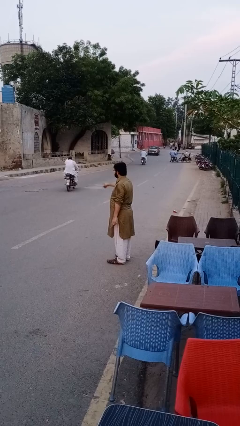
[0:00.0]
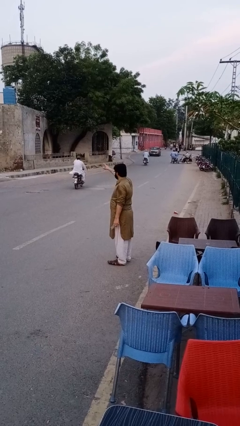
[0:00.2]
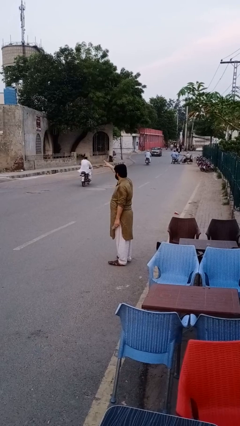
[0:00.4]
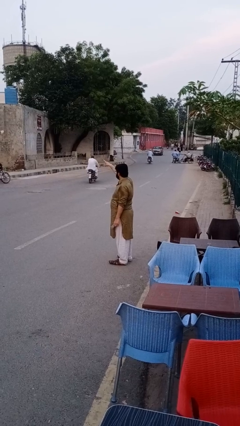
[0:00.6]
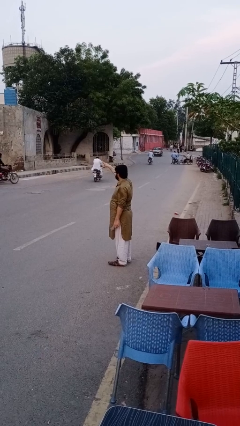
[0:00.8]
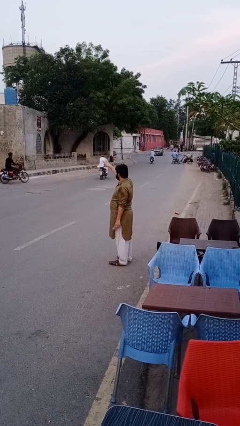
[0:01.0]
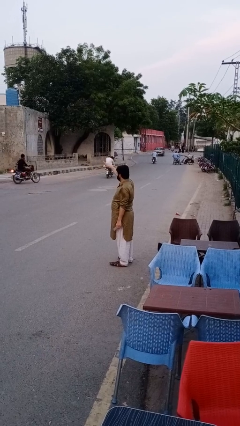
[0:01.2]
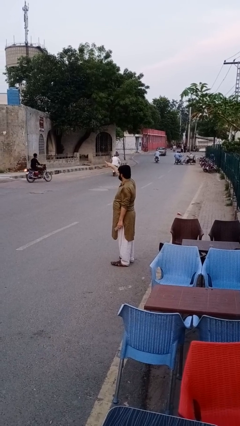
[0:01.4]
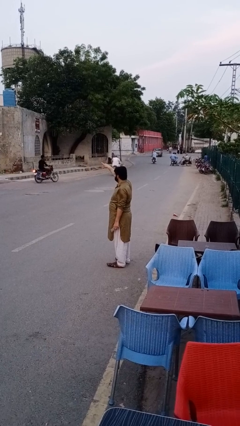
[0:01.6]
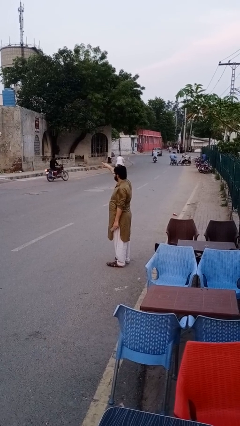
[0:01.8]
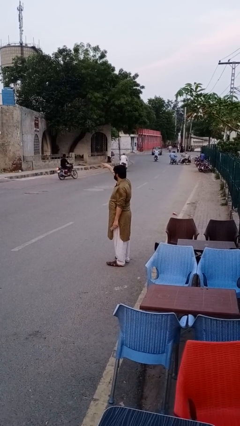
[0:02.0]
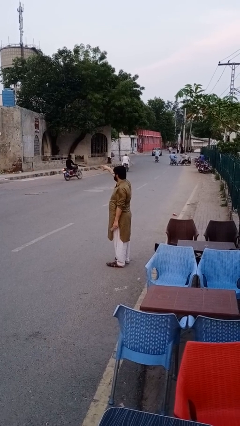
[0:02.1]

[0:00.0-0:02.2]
person takes phone from pocket

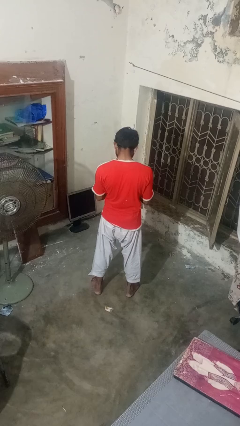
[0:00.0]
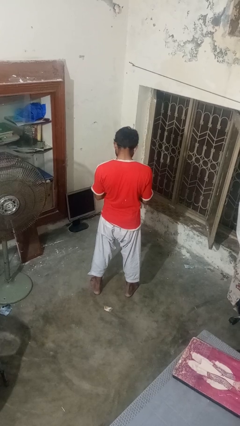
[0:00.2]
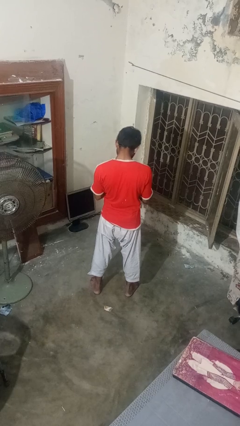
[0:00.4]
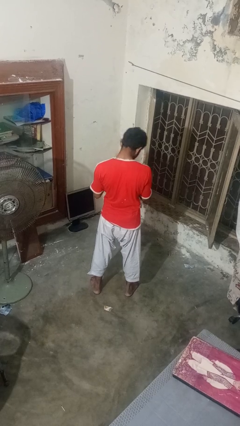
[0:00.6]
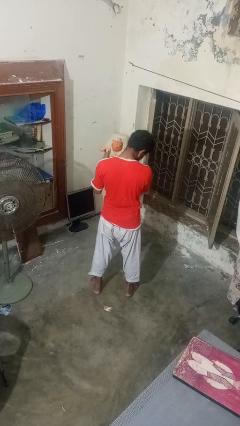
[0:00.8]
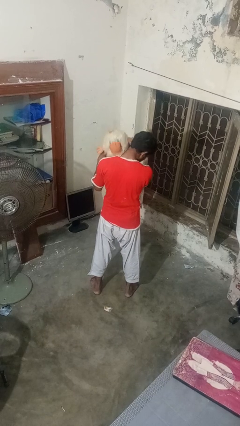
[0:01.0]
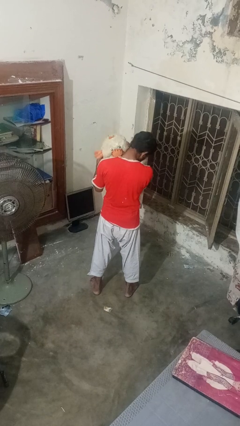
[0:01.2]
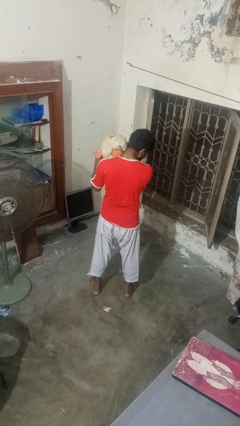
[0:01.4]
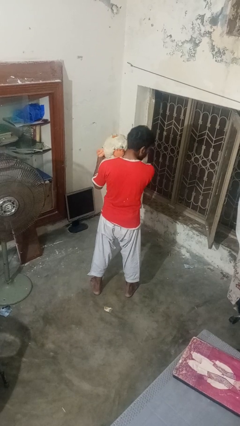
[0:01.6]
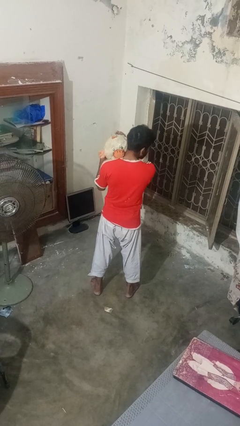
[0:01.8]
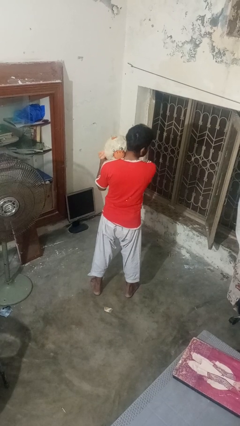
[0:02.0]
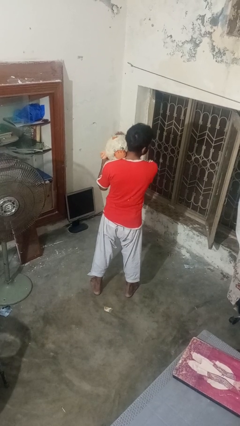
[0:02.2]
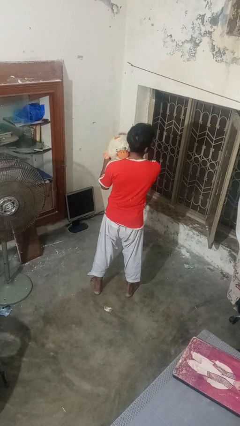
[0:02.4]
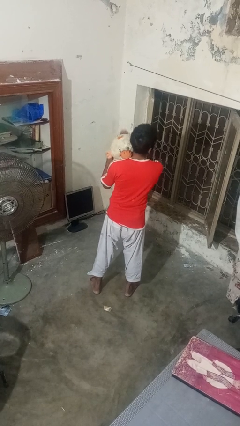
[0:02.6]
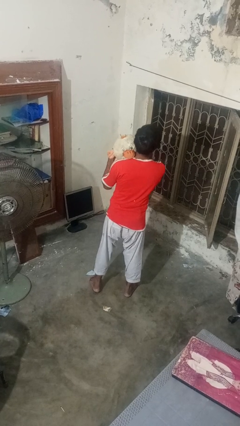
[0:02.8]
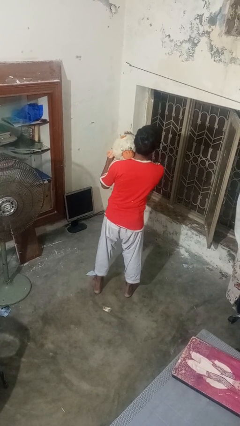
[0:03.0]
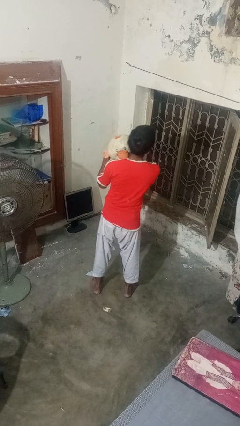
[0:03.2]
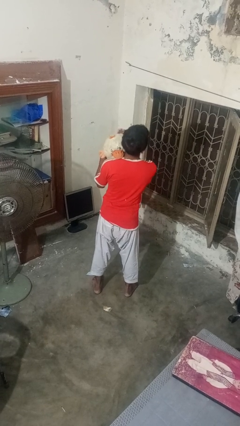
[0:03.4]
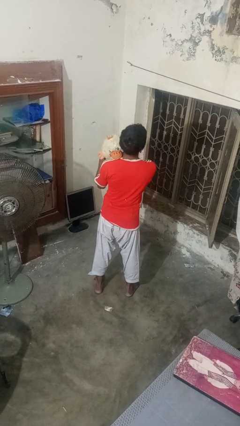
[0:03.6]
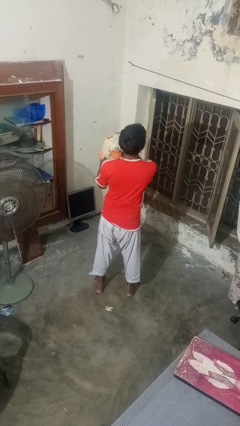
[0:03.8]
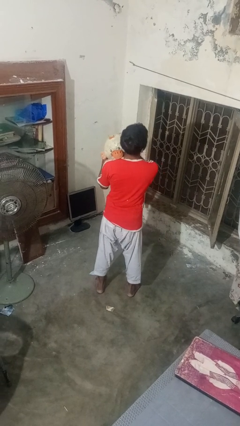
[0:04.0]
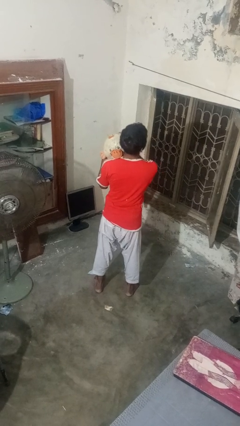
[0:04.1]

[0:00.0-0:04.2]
person hugs stuffed animal

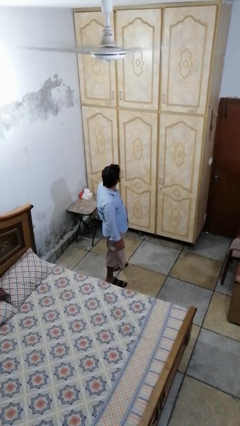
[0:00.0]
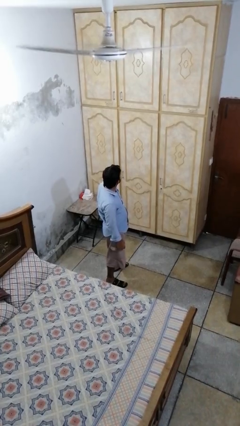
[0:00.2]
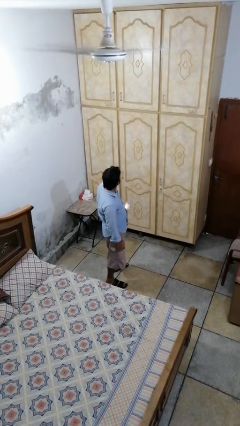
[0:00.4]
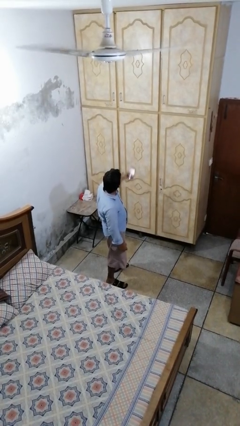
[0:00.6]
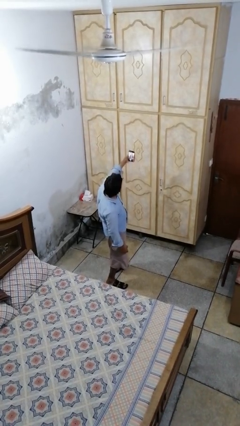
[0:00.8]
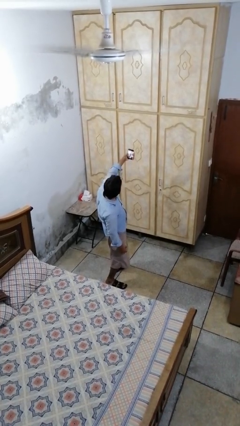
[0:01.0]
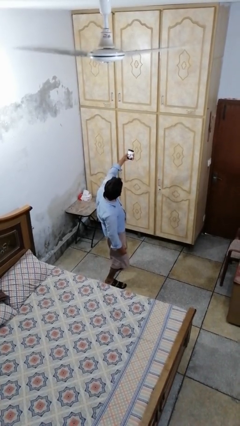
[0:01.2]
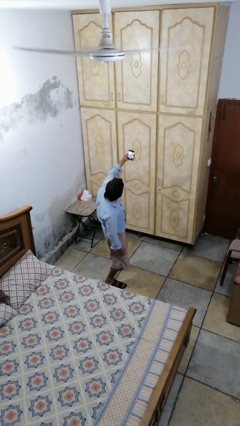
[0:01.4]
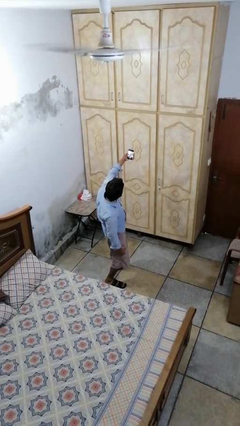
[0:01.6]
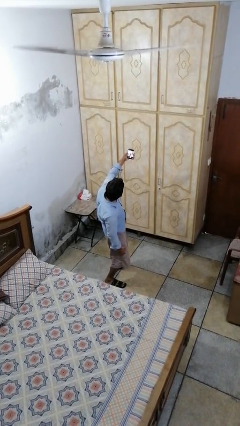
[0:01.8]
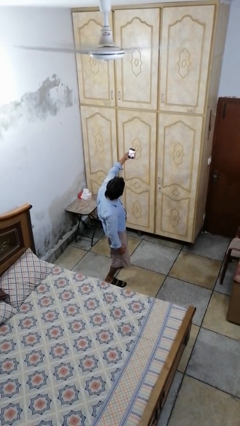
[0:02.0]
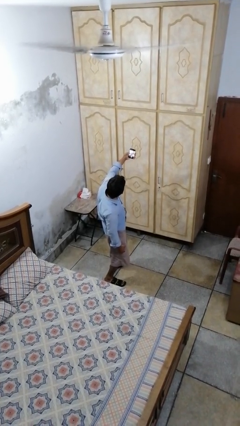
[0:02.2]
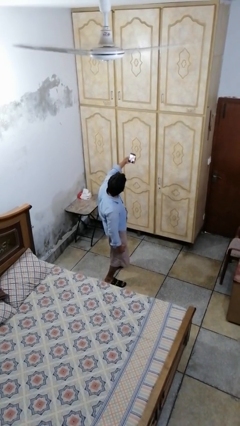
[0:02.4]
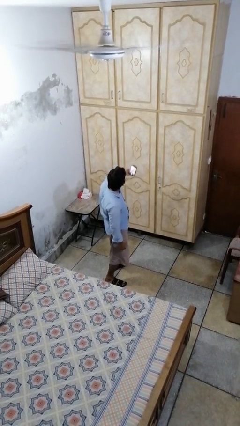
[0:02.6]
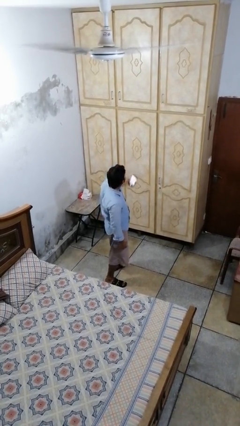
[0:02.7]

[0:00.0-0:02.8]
person takes selfie

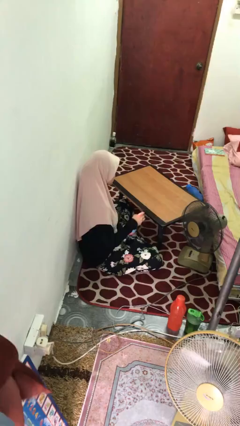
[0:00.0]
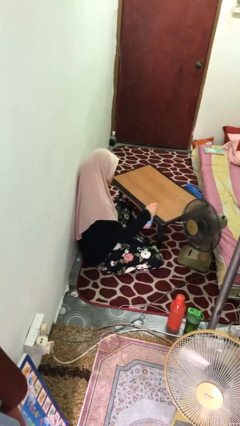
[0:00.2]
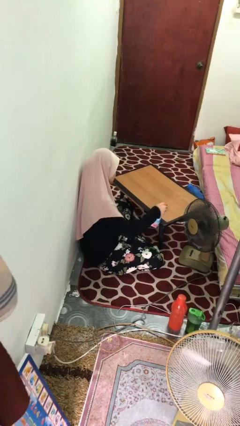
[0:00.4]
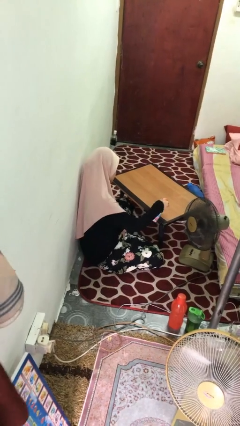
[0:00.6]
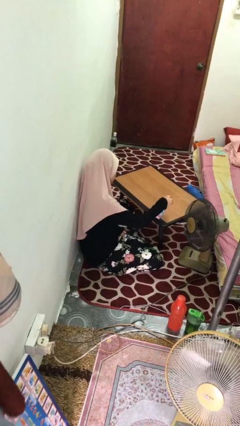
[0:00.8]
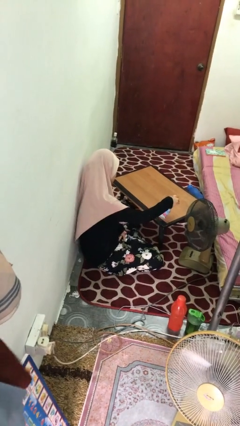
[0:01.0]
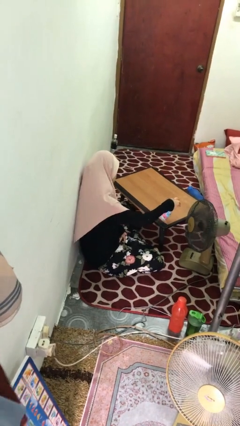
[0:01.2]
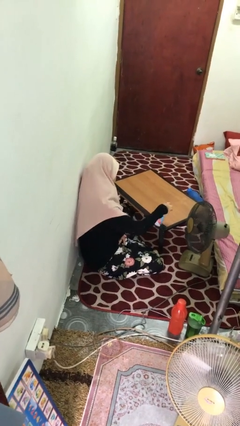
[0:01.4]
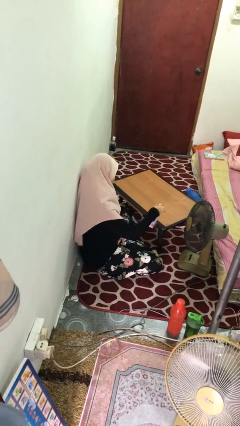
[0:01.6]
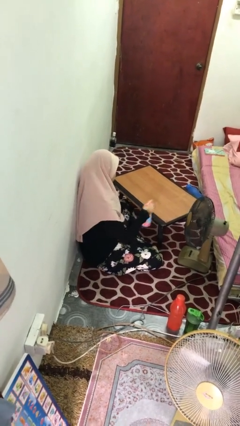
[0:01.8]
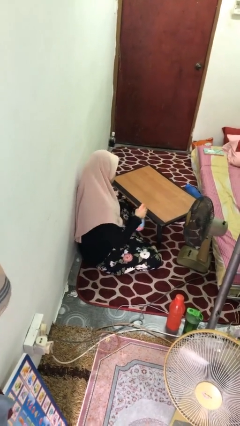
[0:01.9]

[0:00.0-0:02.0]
person sprays from bottle

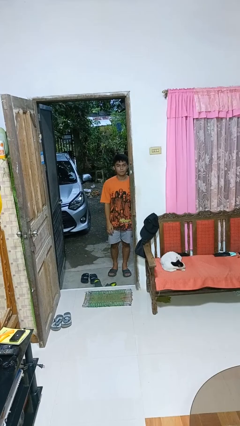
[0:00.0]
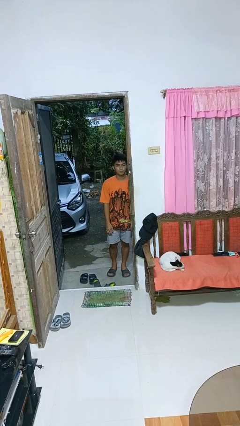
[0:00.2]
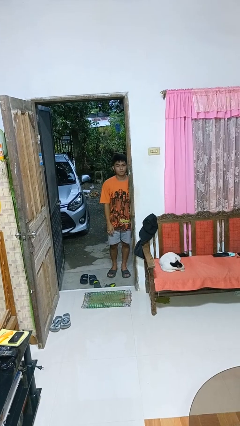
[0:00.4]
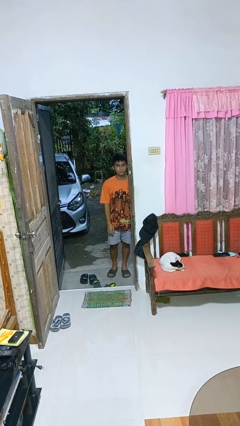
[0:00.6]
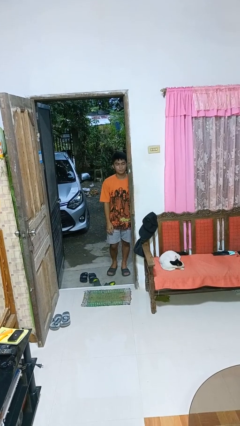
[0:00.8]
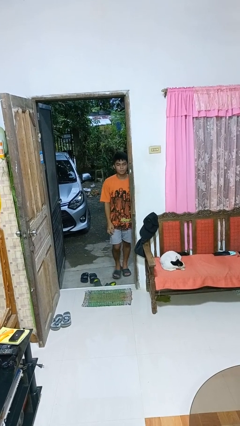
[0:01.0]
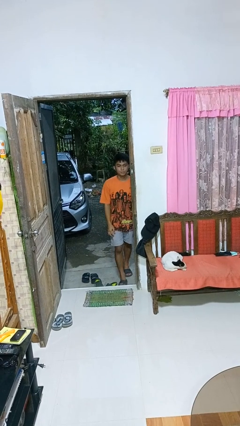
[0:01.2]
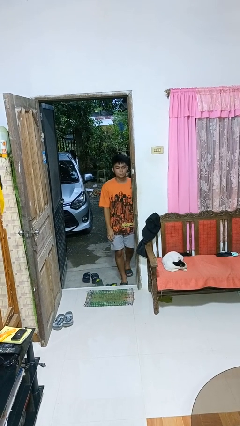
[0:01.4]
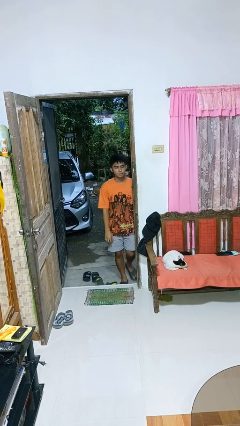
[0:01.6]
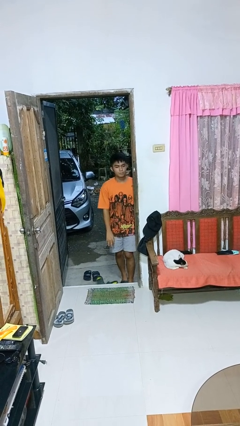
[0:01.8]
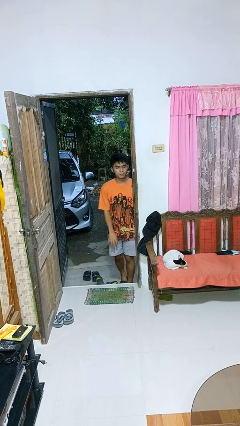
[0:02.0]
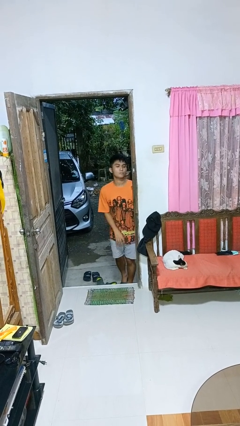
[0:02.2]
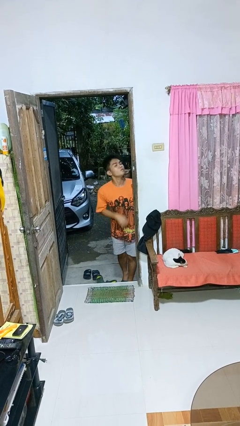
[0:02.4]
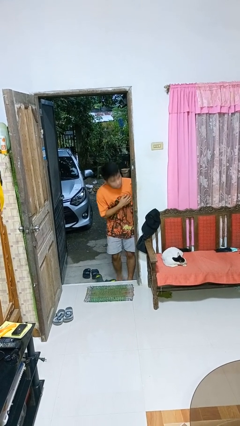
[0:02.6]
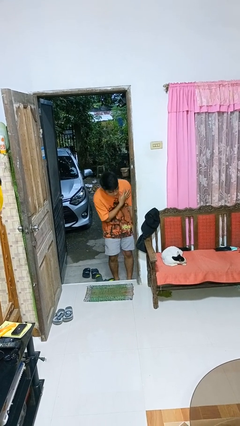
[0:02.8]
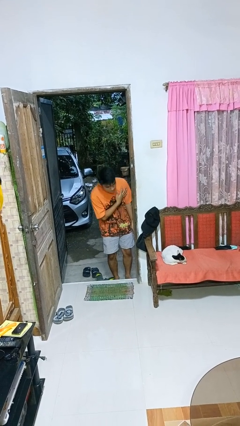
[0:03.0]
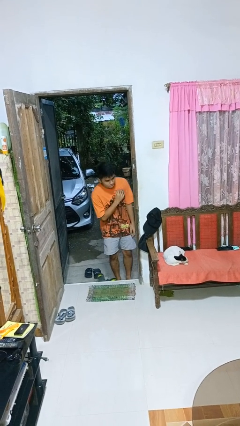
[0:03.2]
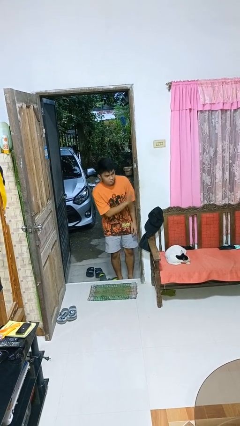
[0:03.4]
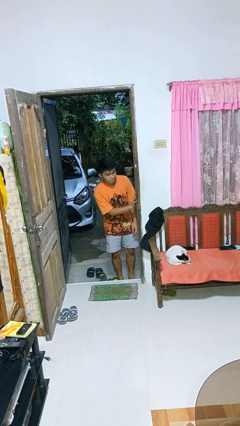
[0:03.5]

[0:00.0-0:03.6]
person bumps into wall

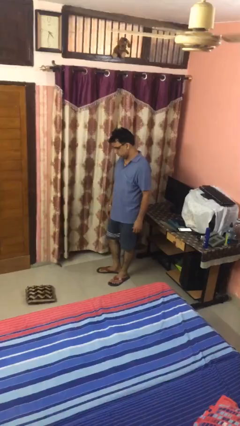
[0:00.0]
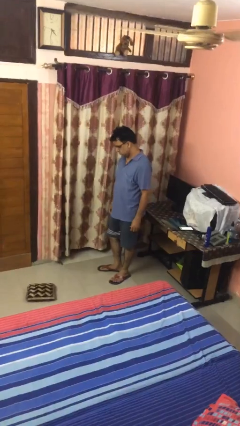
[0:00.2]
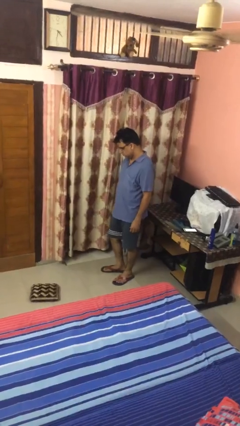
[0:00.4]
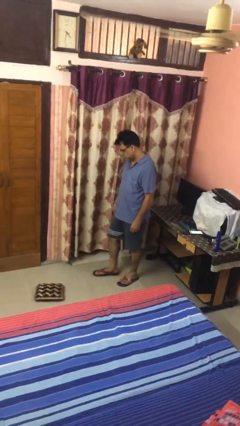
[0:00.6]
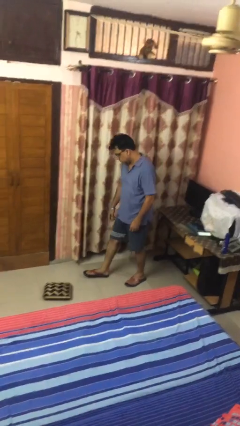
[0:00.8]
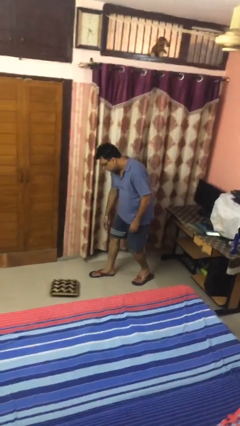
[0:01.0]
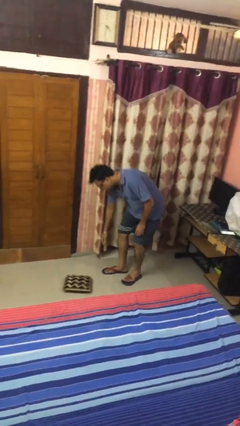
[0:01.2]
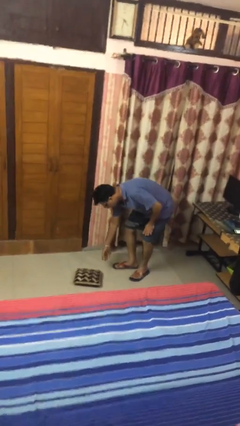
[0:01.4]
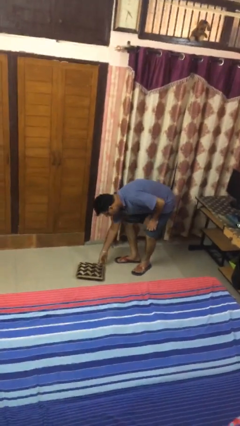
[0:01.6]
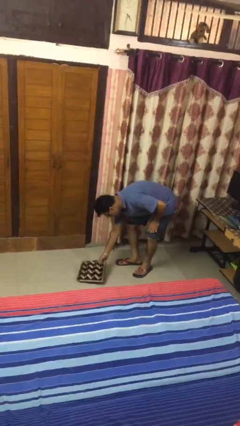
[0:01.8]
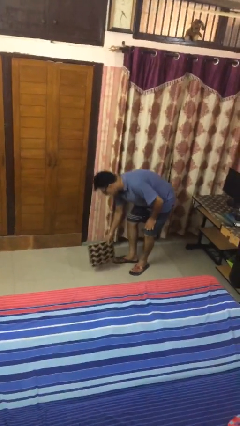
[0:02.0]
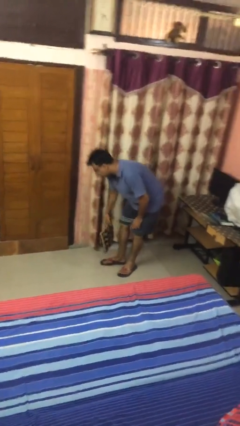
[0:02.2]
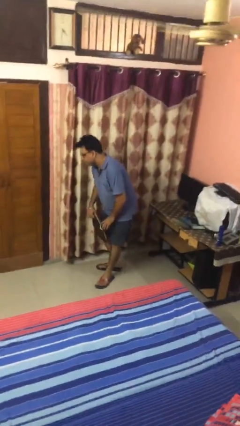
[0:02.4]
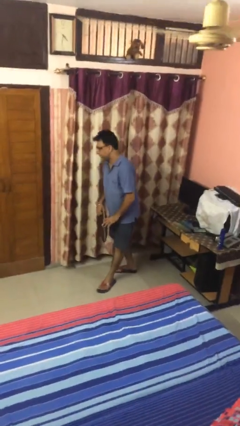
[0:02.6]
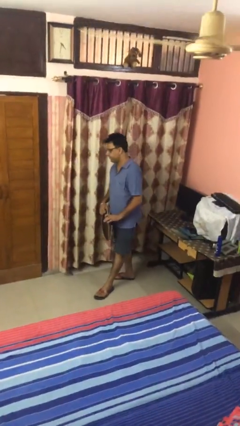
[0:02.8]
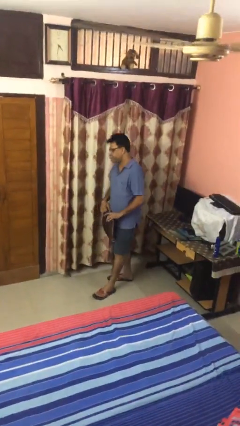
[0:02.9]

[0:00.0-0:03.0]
person picks up object from floor
